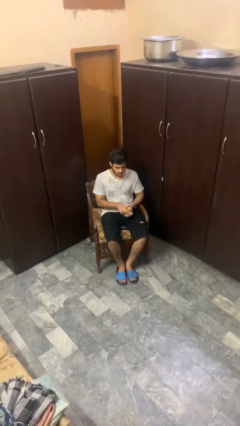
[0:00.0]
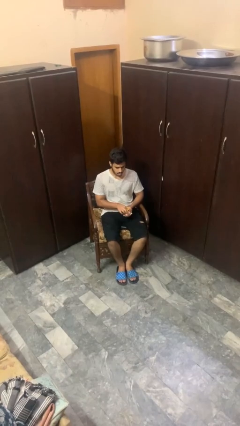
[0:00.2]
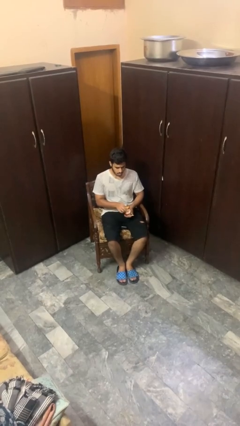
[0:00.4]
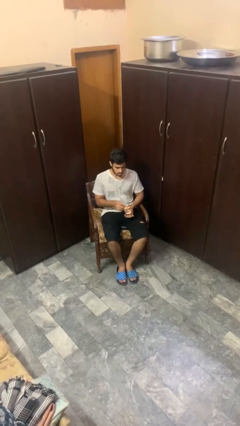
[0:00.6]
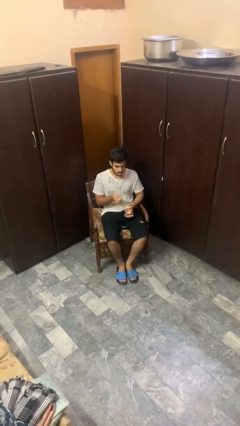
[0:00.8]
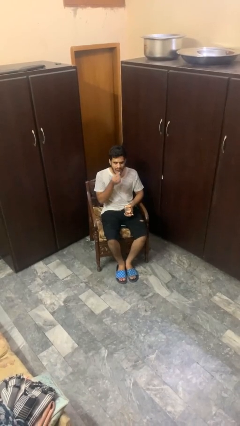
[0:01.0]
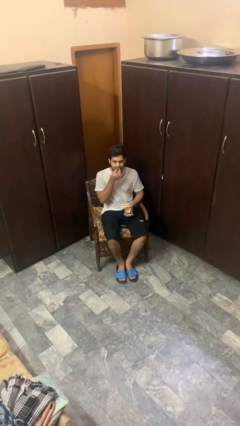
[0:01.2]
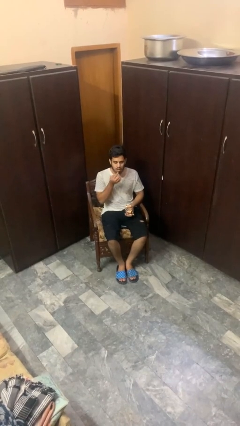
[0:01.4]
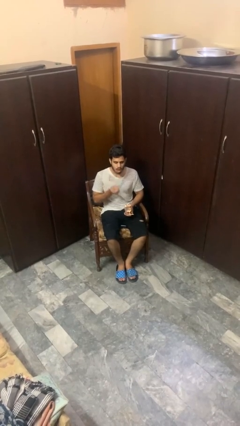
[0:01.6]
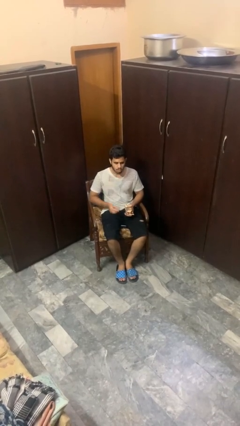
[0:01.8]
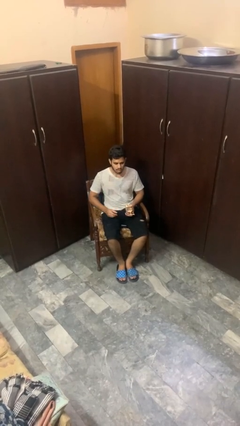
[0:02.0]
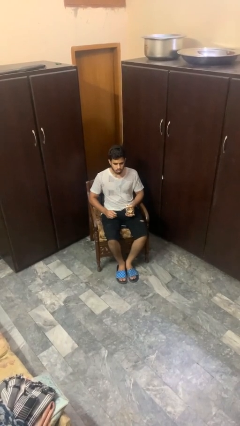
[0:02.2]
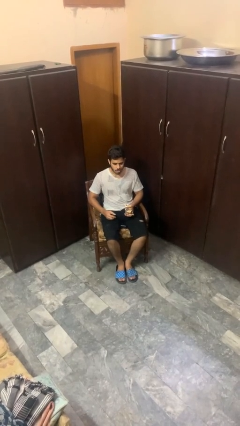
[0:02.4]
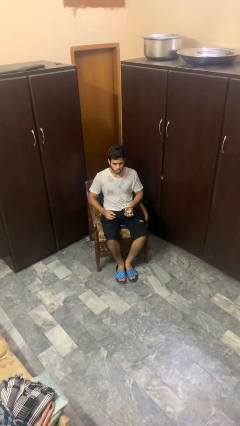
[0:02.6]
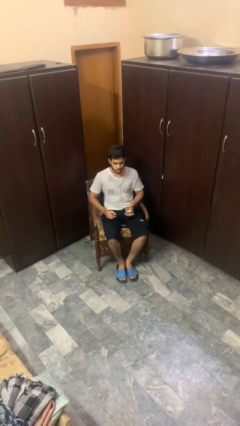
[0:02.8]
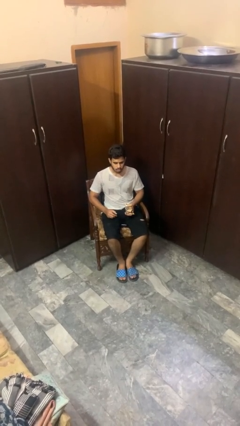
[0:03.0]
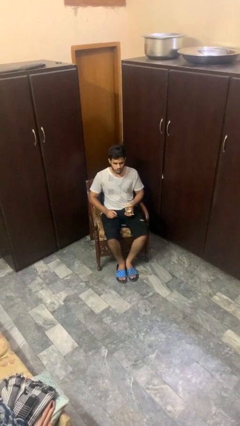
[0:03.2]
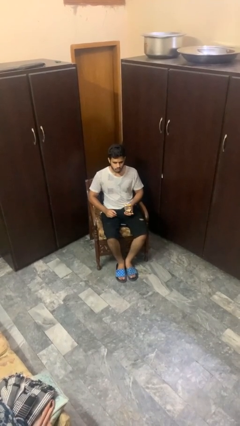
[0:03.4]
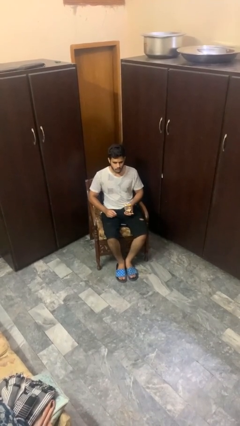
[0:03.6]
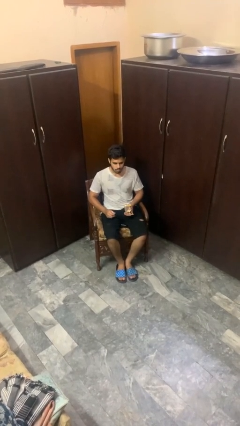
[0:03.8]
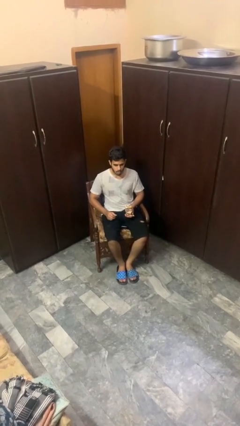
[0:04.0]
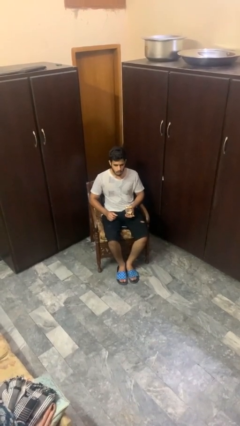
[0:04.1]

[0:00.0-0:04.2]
person eats snack from bag

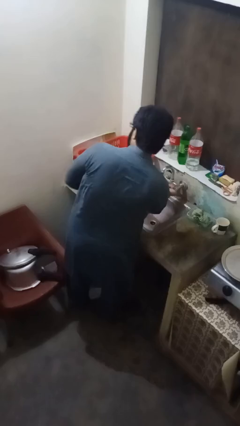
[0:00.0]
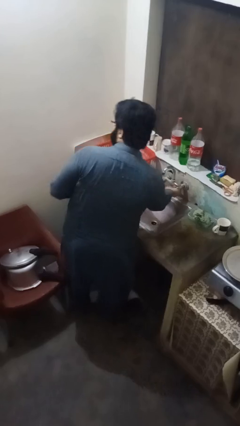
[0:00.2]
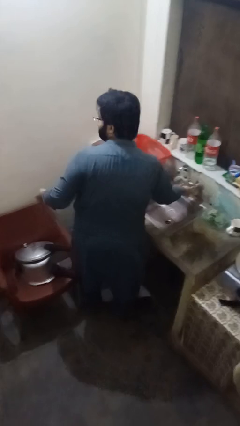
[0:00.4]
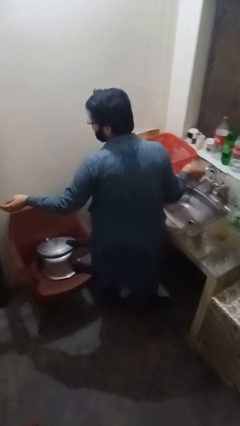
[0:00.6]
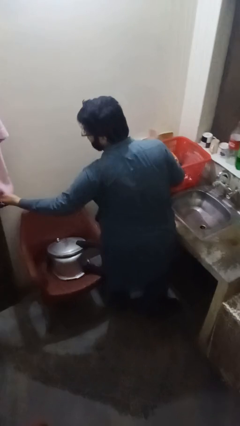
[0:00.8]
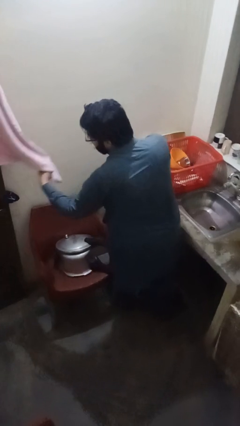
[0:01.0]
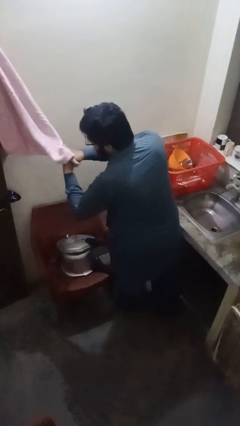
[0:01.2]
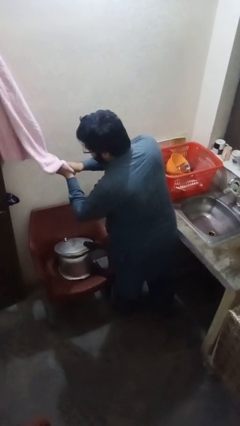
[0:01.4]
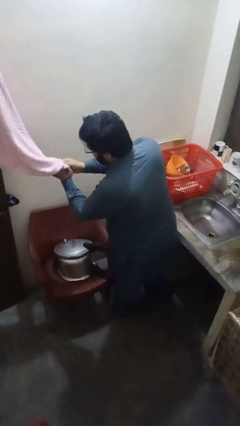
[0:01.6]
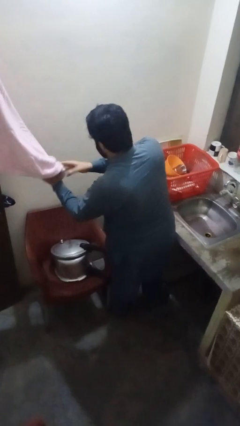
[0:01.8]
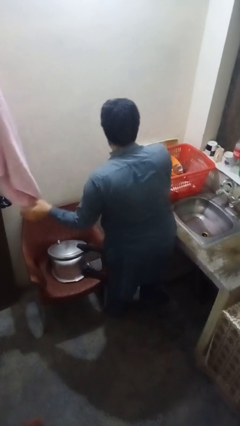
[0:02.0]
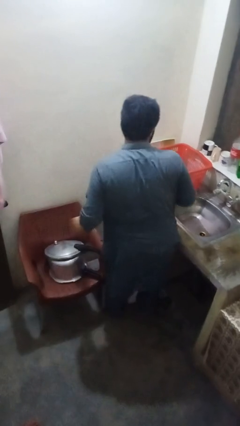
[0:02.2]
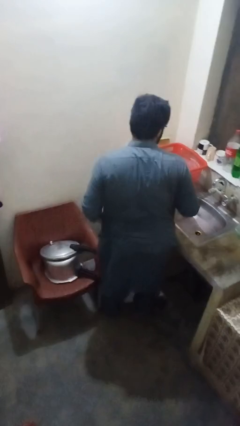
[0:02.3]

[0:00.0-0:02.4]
person dries hands with towel

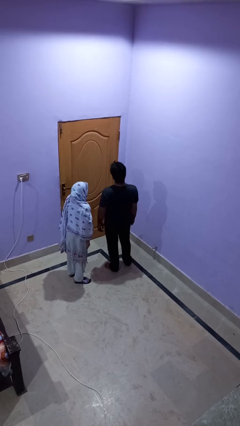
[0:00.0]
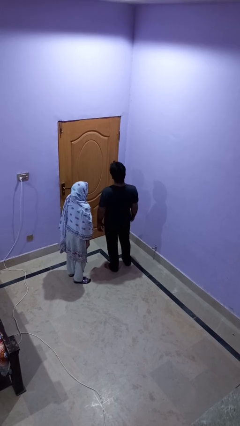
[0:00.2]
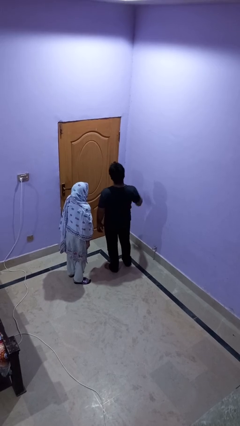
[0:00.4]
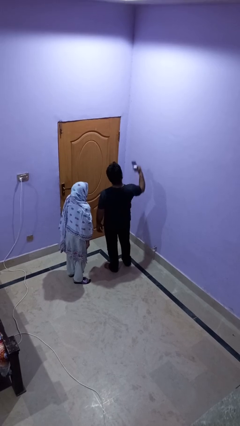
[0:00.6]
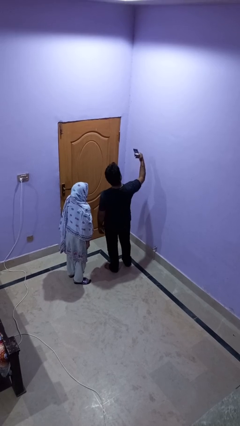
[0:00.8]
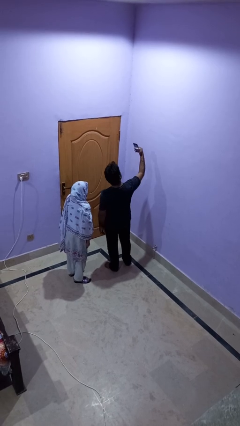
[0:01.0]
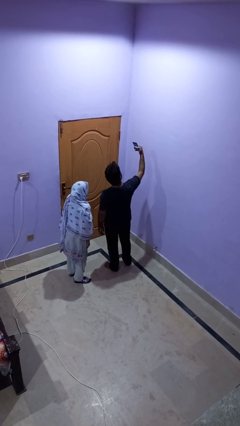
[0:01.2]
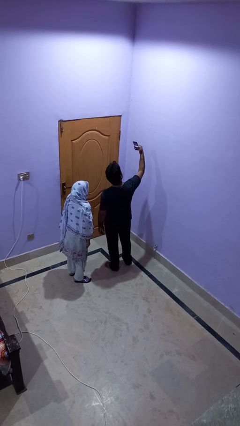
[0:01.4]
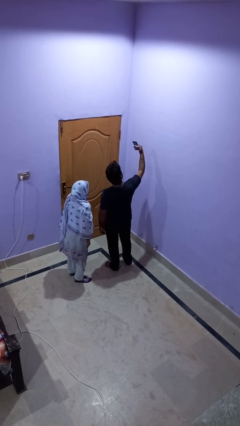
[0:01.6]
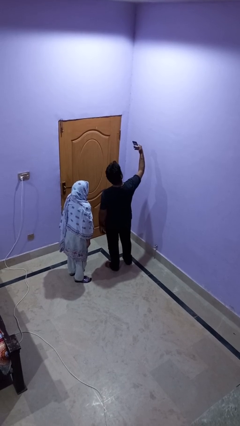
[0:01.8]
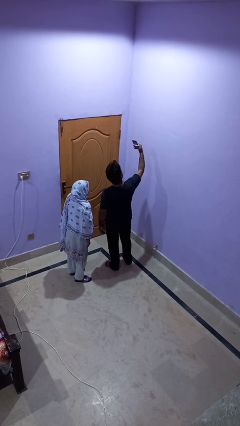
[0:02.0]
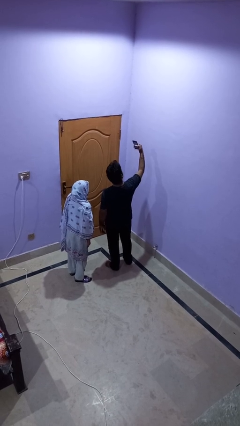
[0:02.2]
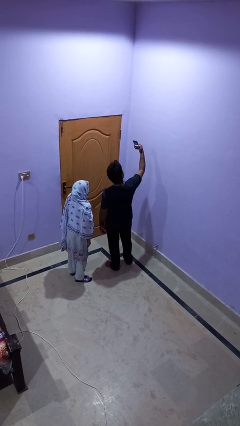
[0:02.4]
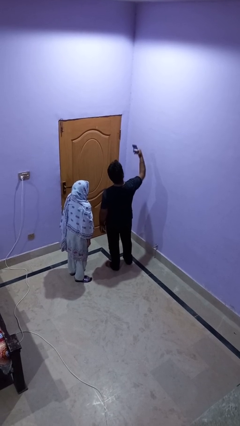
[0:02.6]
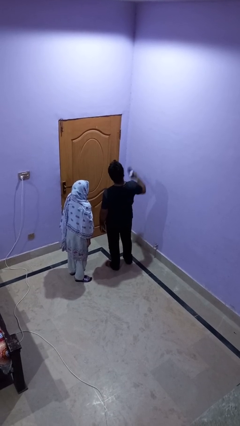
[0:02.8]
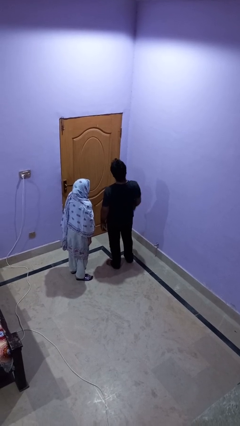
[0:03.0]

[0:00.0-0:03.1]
person takes selfie with person

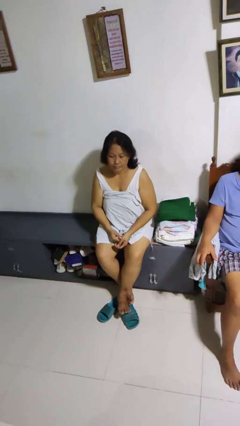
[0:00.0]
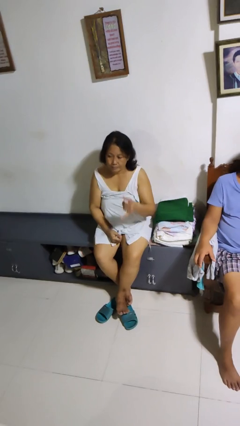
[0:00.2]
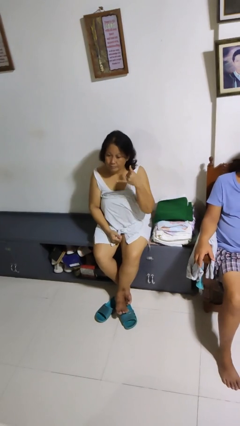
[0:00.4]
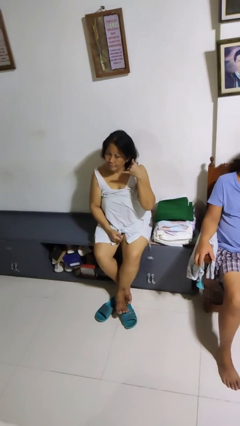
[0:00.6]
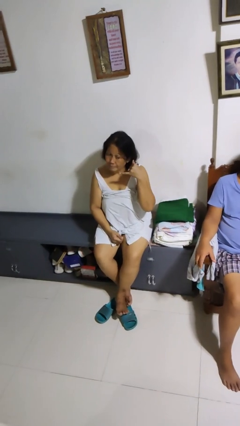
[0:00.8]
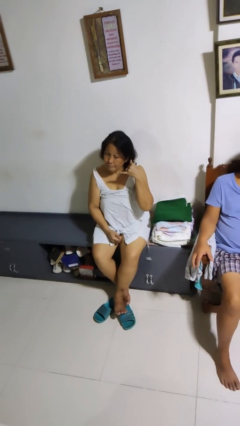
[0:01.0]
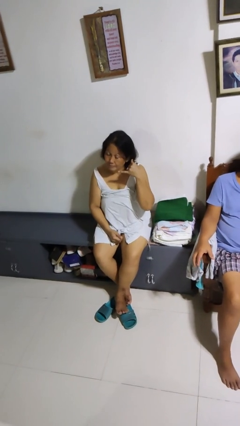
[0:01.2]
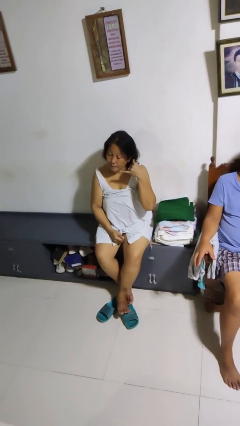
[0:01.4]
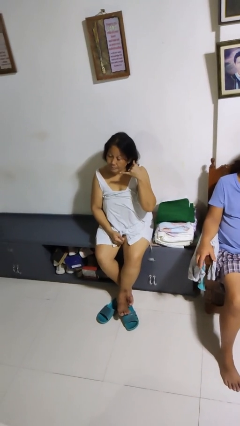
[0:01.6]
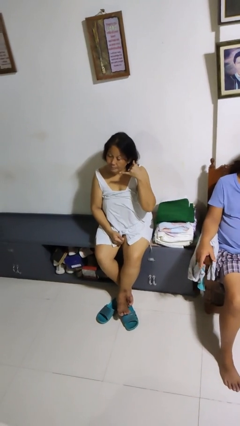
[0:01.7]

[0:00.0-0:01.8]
person gestures call me

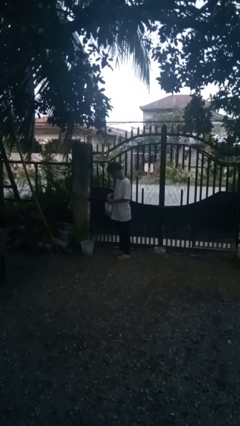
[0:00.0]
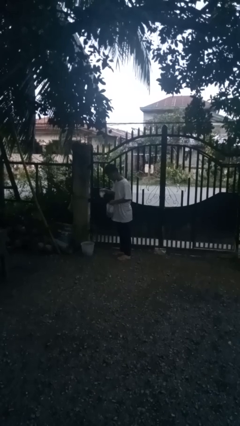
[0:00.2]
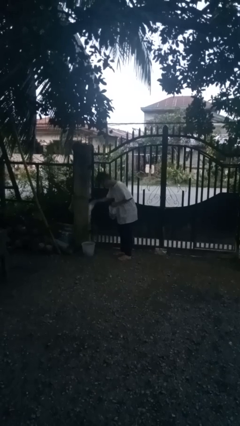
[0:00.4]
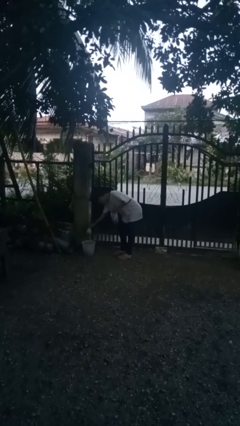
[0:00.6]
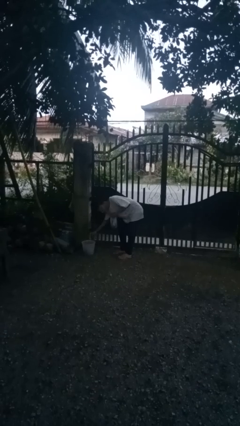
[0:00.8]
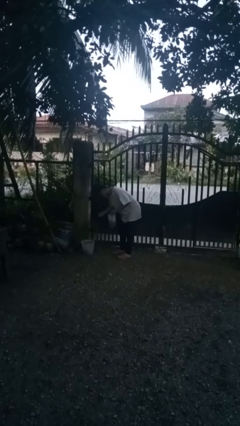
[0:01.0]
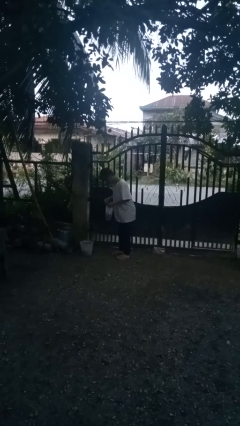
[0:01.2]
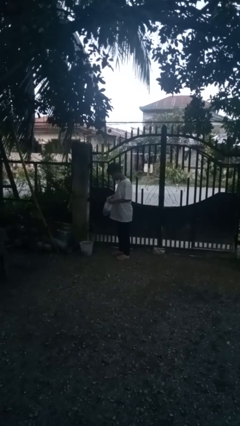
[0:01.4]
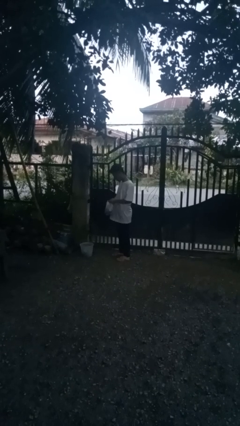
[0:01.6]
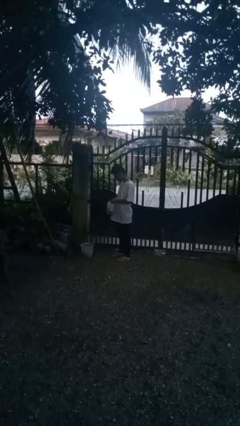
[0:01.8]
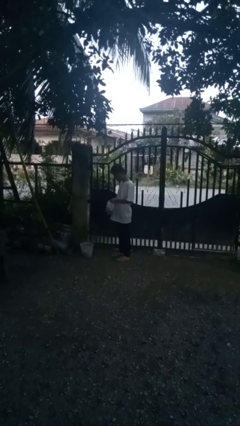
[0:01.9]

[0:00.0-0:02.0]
person discards trash

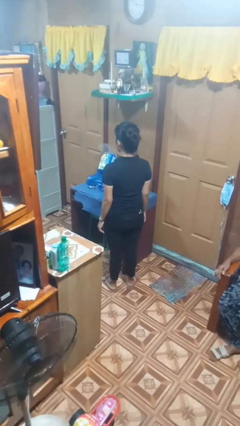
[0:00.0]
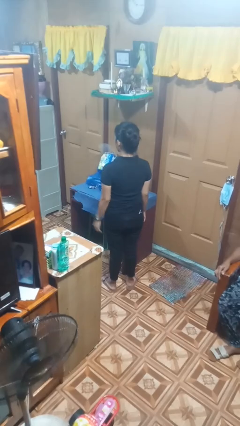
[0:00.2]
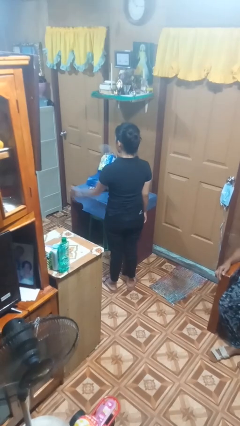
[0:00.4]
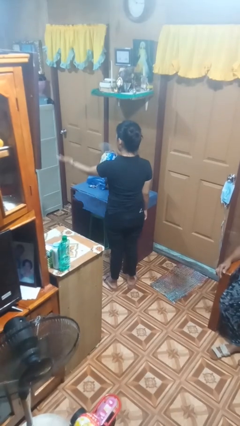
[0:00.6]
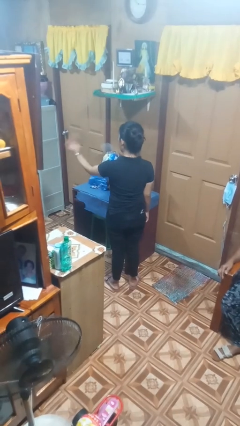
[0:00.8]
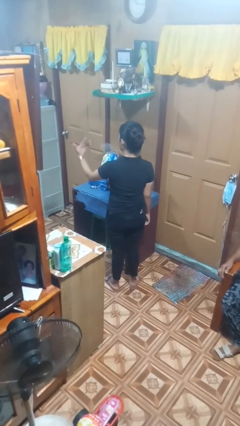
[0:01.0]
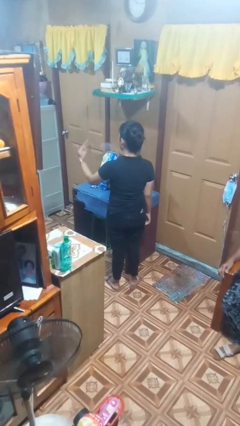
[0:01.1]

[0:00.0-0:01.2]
person gestures come here

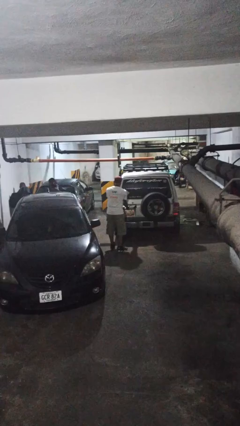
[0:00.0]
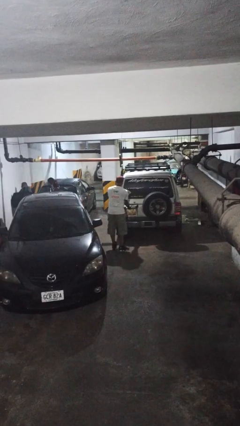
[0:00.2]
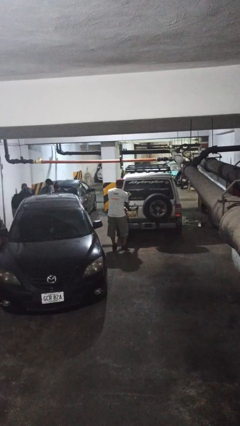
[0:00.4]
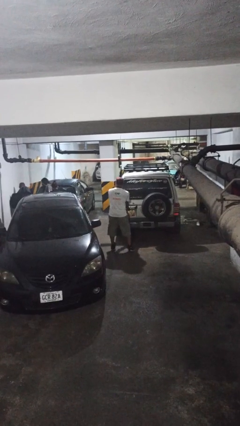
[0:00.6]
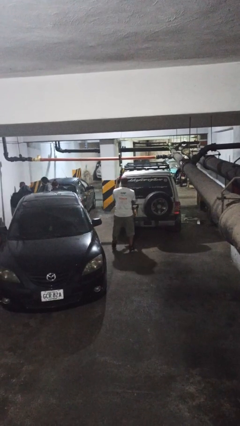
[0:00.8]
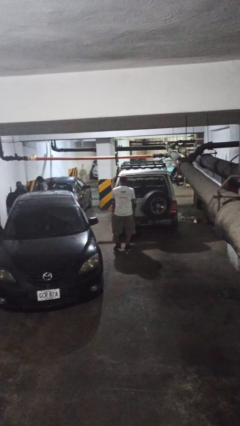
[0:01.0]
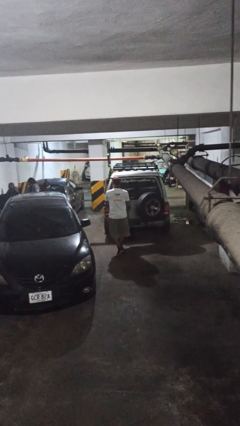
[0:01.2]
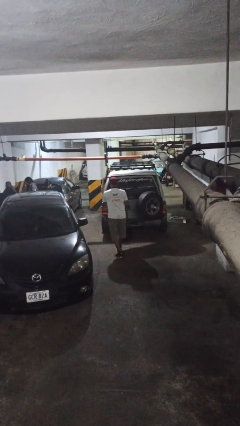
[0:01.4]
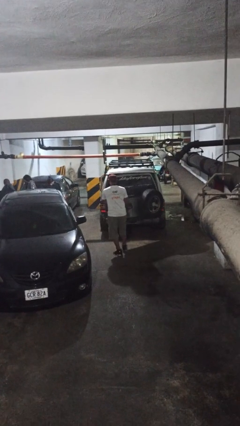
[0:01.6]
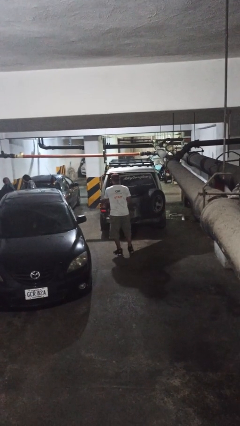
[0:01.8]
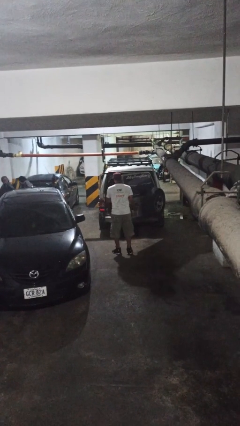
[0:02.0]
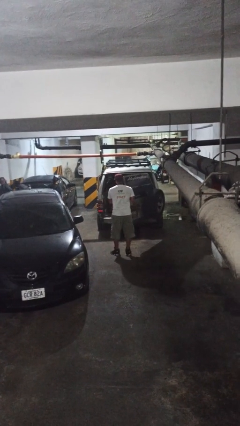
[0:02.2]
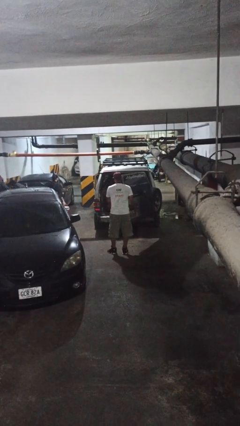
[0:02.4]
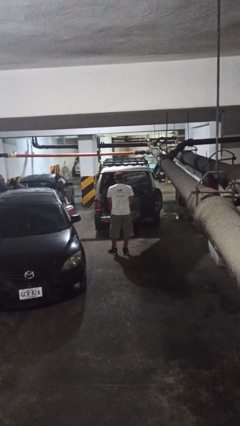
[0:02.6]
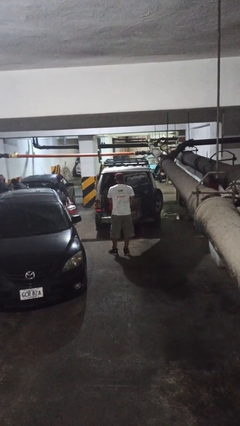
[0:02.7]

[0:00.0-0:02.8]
person opens car trunk
